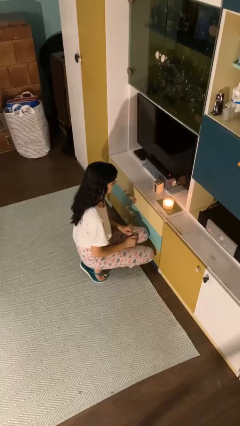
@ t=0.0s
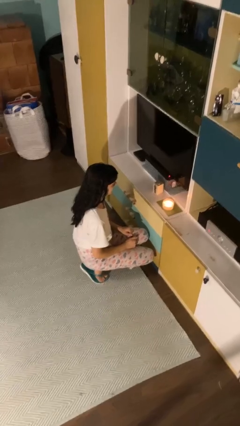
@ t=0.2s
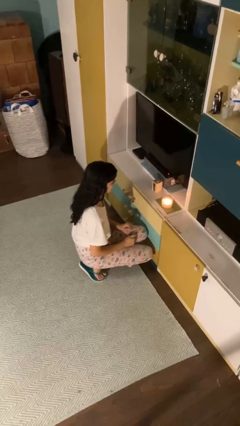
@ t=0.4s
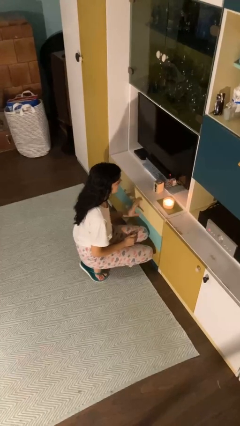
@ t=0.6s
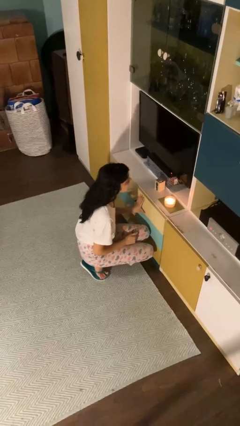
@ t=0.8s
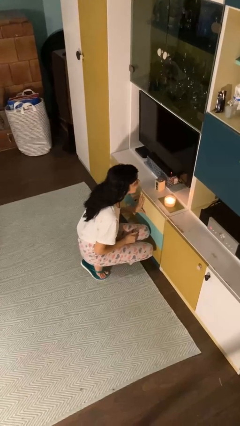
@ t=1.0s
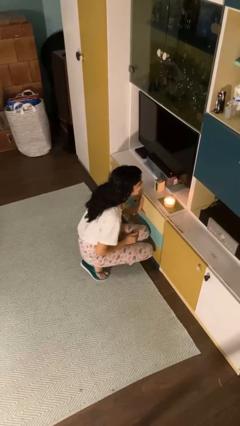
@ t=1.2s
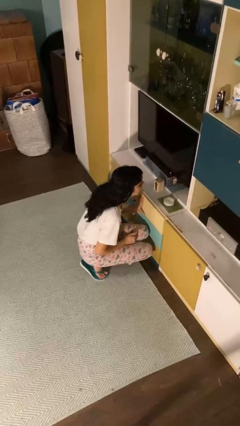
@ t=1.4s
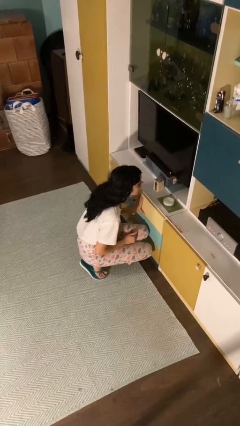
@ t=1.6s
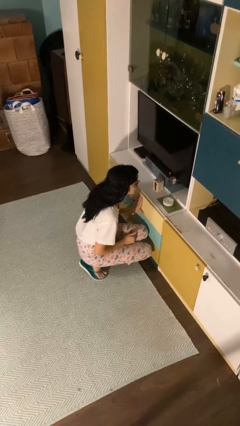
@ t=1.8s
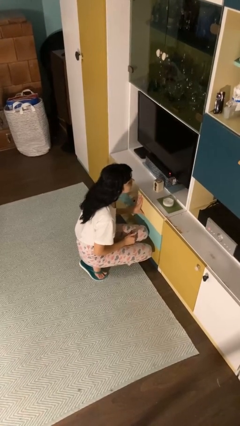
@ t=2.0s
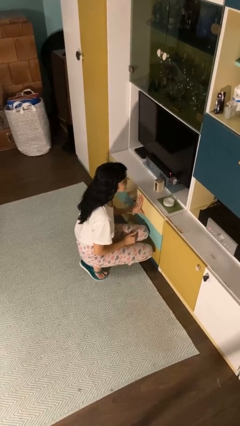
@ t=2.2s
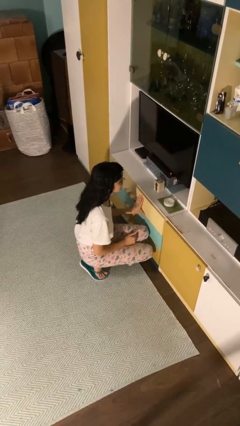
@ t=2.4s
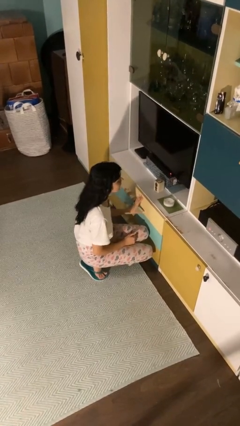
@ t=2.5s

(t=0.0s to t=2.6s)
person extinguishes candle

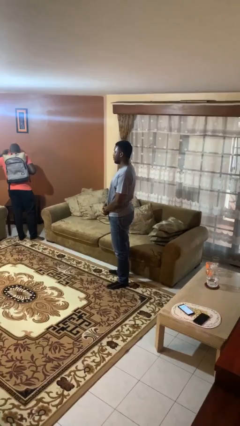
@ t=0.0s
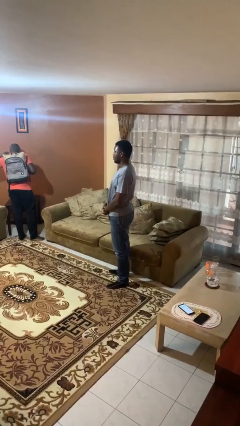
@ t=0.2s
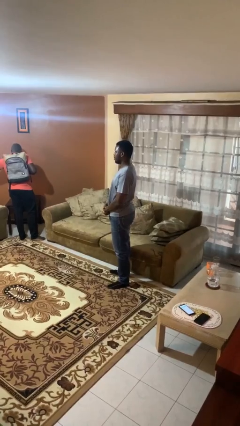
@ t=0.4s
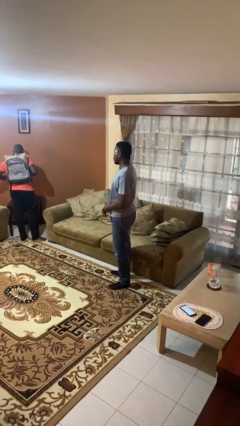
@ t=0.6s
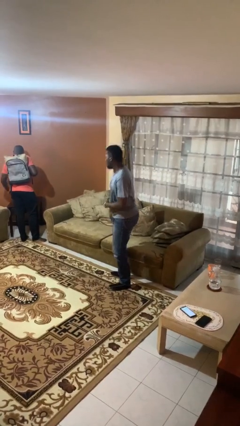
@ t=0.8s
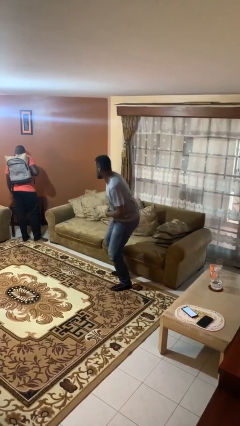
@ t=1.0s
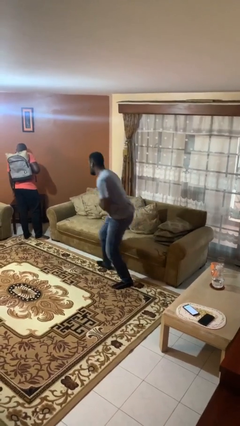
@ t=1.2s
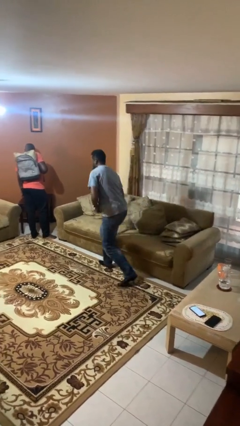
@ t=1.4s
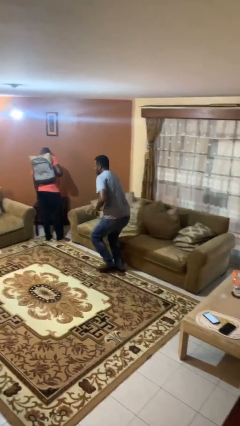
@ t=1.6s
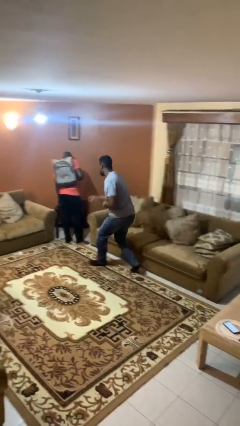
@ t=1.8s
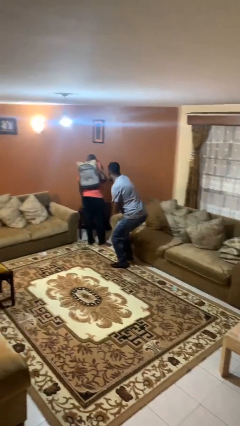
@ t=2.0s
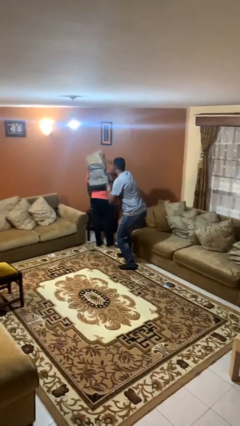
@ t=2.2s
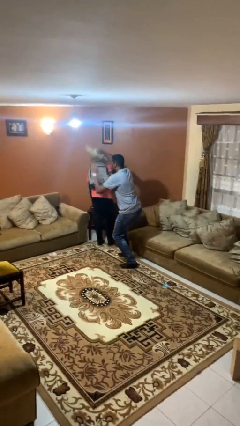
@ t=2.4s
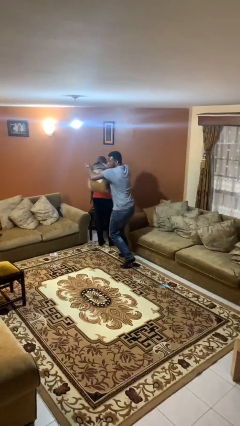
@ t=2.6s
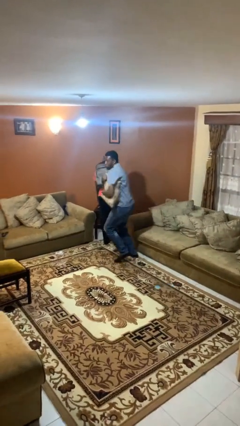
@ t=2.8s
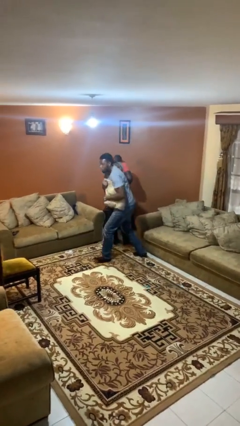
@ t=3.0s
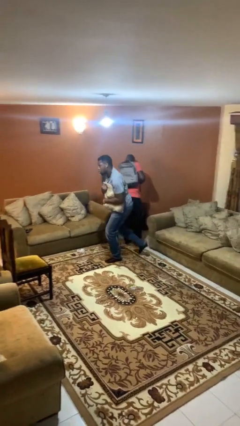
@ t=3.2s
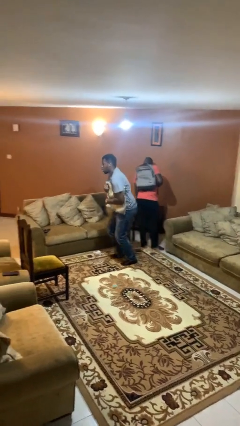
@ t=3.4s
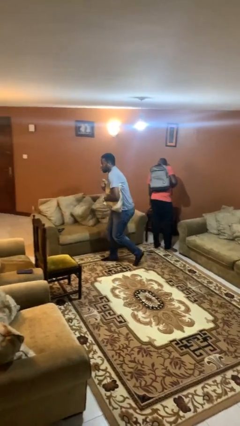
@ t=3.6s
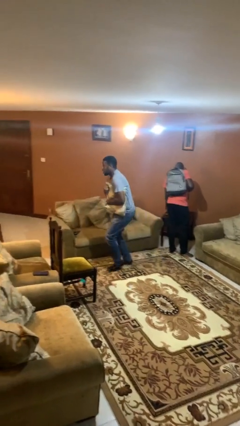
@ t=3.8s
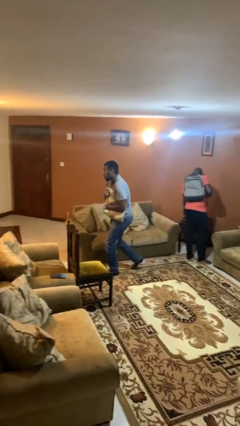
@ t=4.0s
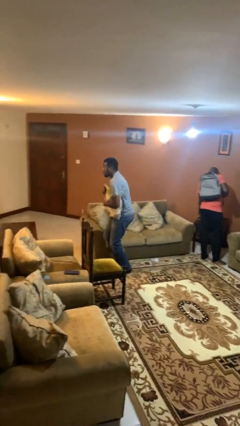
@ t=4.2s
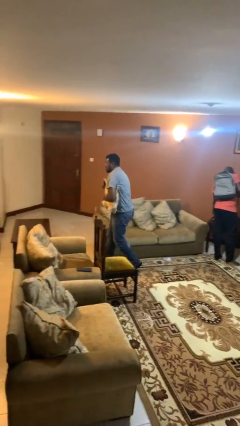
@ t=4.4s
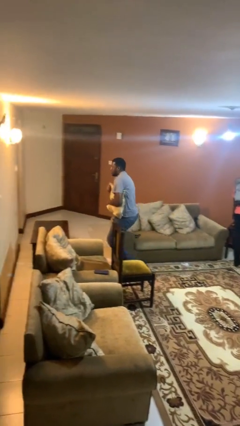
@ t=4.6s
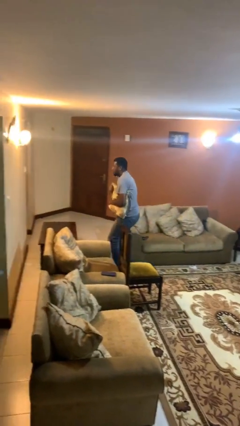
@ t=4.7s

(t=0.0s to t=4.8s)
person steals object from person

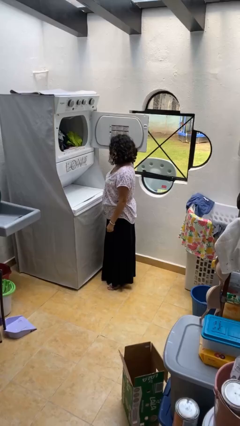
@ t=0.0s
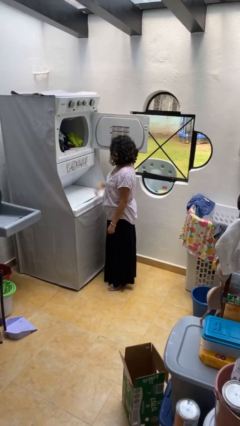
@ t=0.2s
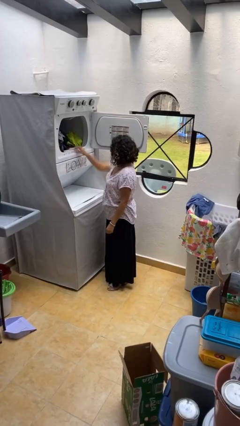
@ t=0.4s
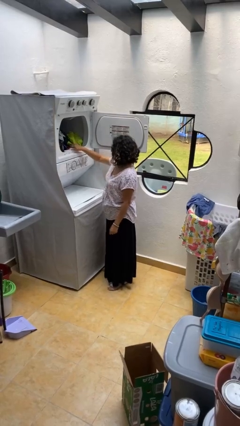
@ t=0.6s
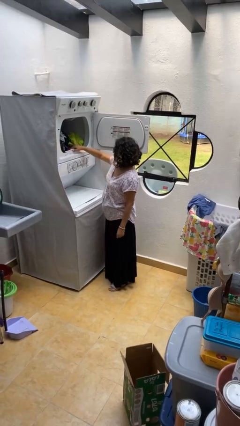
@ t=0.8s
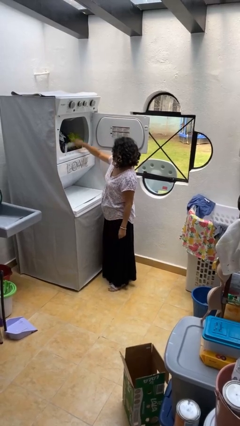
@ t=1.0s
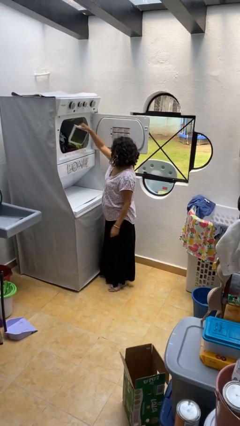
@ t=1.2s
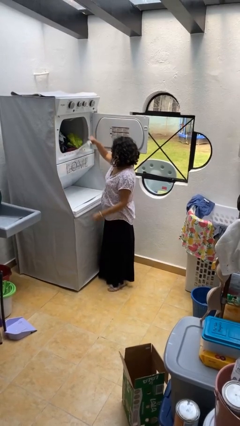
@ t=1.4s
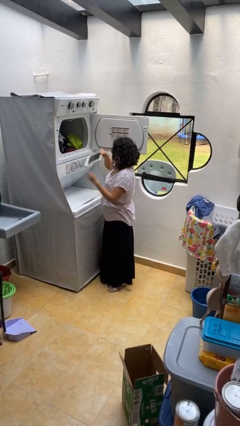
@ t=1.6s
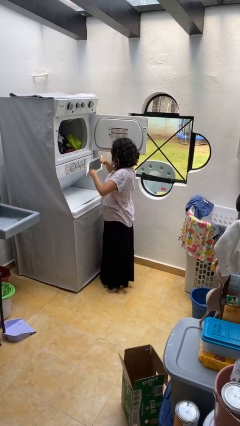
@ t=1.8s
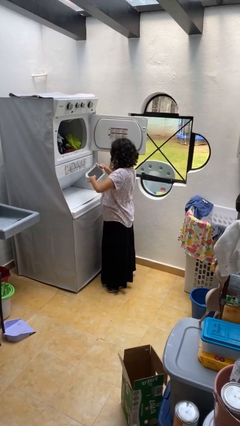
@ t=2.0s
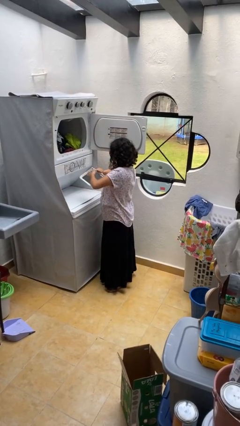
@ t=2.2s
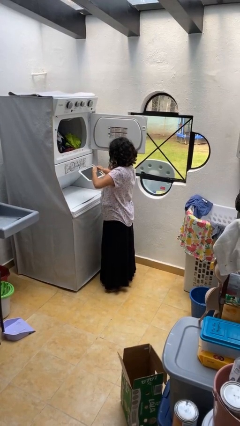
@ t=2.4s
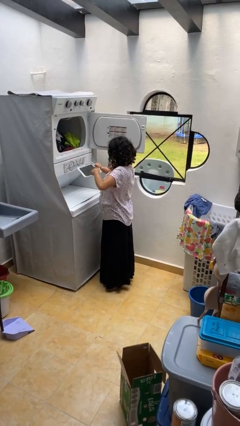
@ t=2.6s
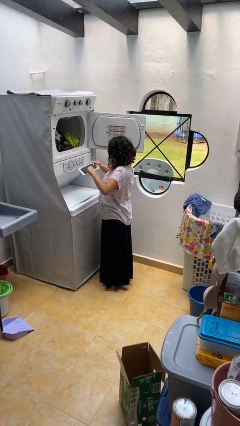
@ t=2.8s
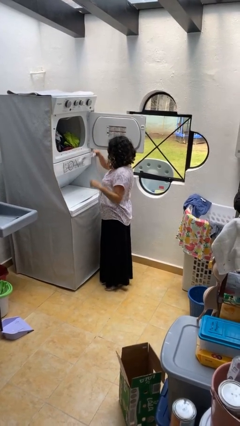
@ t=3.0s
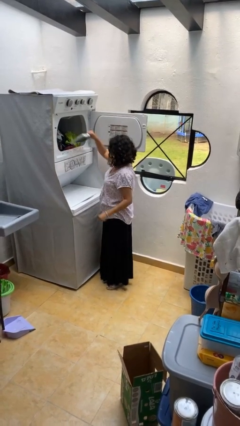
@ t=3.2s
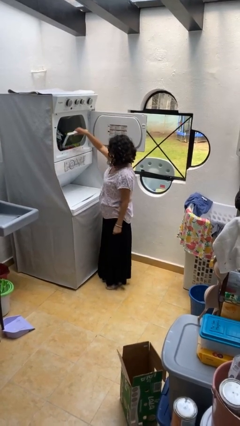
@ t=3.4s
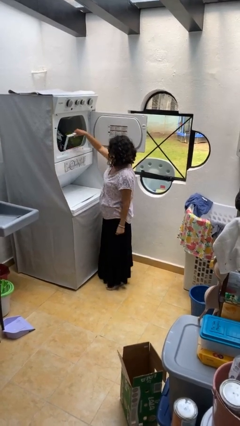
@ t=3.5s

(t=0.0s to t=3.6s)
person cleans dryer lint trap

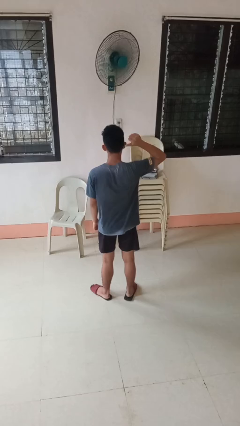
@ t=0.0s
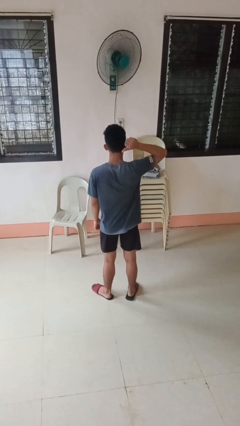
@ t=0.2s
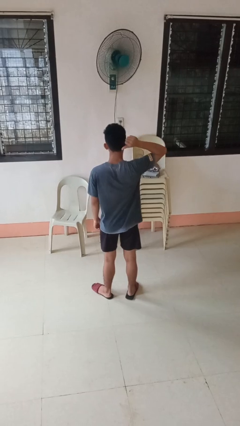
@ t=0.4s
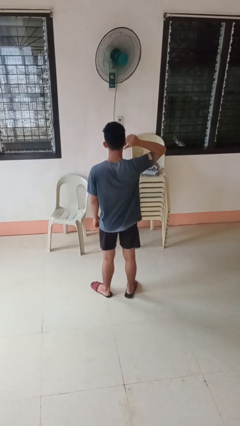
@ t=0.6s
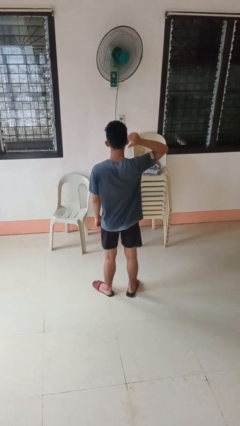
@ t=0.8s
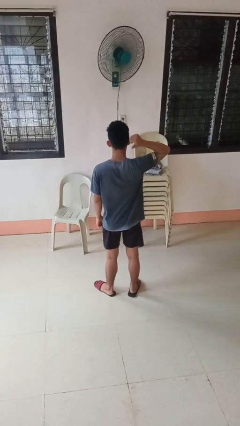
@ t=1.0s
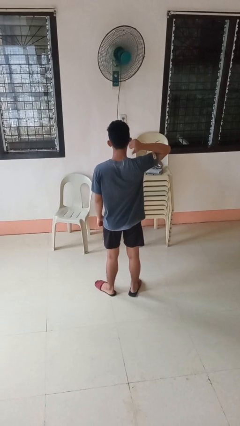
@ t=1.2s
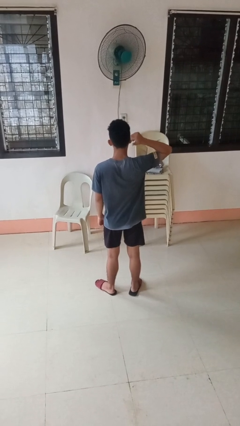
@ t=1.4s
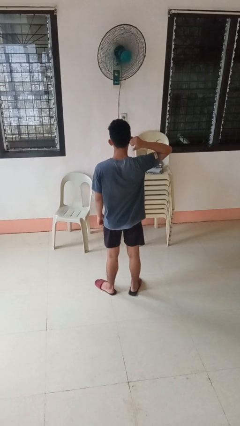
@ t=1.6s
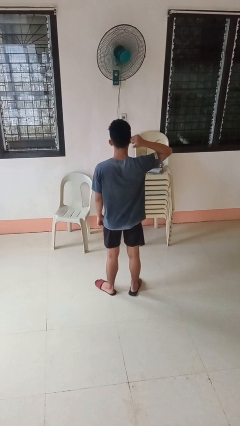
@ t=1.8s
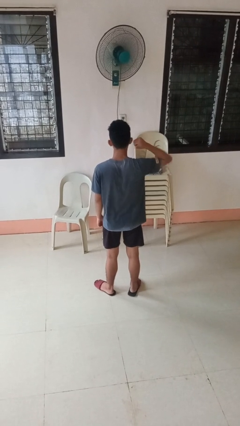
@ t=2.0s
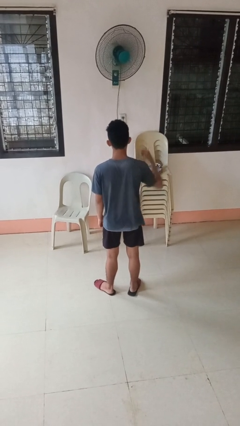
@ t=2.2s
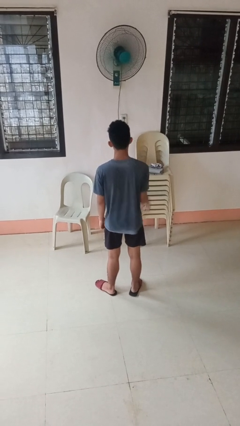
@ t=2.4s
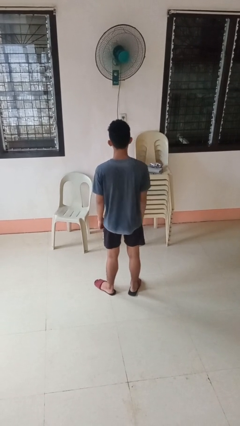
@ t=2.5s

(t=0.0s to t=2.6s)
person gestures behind me

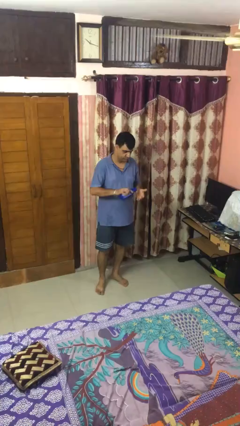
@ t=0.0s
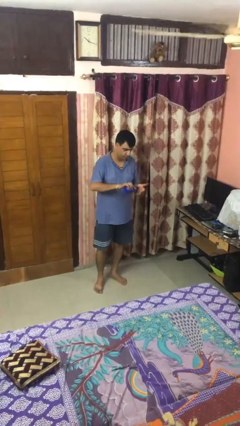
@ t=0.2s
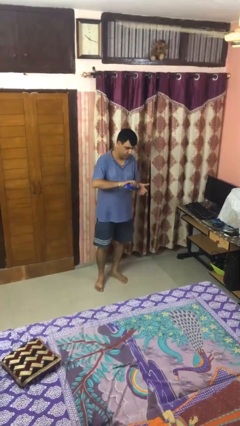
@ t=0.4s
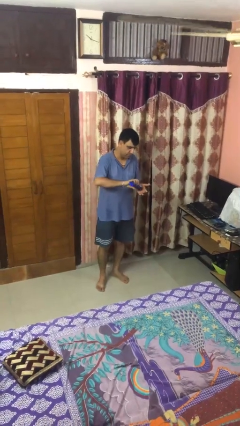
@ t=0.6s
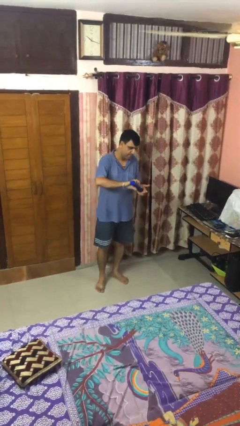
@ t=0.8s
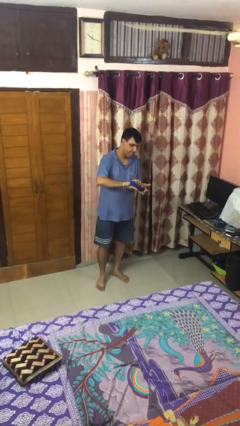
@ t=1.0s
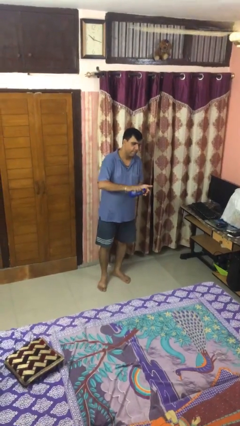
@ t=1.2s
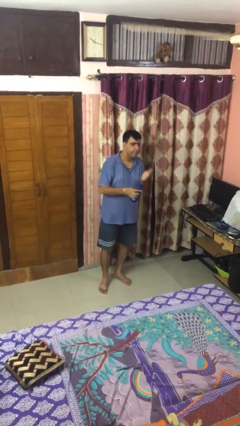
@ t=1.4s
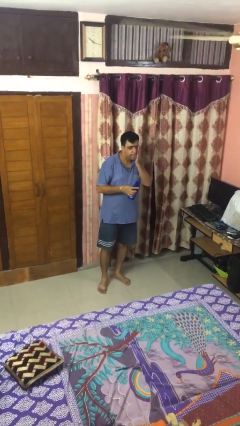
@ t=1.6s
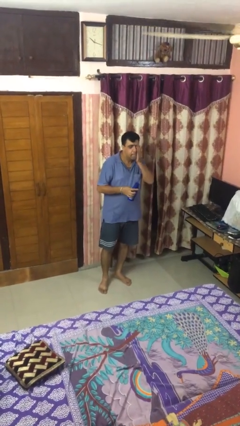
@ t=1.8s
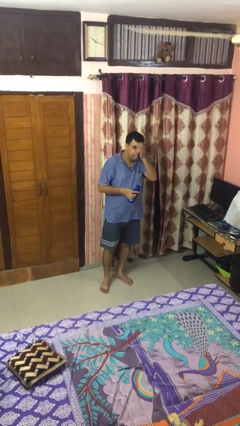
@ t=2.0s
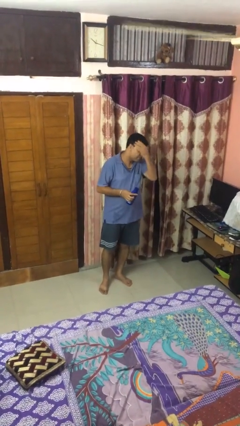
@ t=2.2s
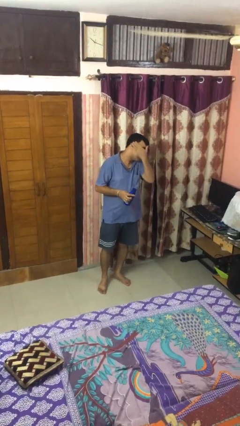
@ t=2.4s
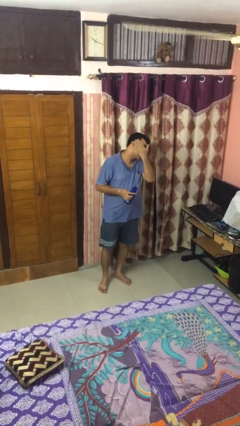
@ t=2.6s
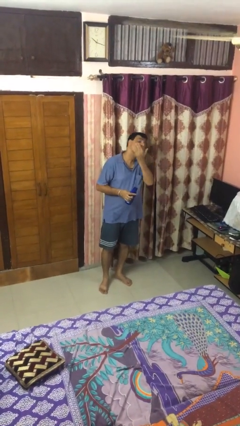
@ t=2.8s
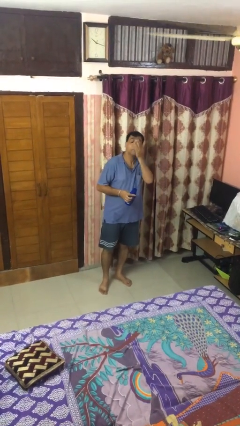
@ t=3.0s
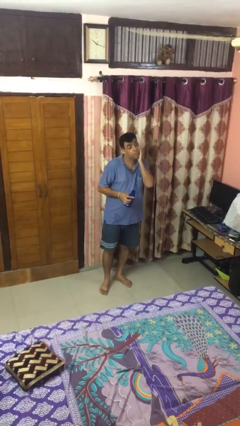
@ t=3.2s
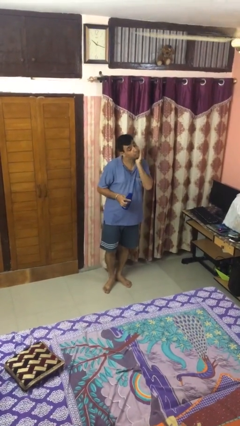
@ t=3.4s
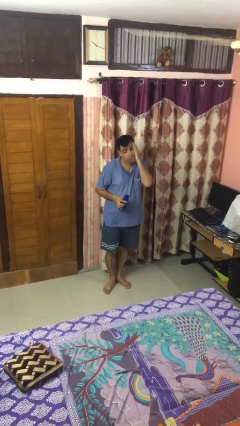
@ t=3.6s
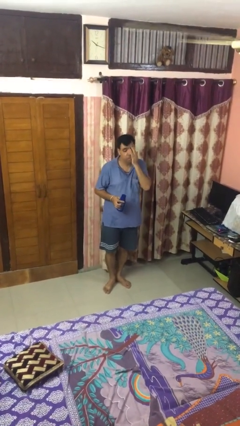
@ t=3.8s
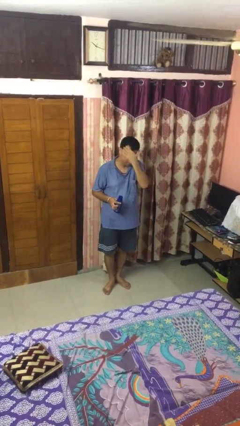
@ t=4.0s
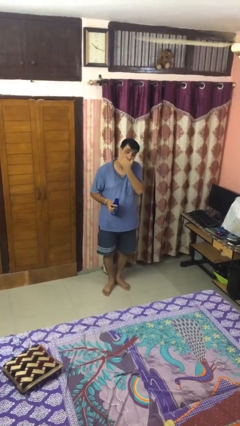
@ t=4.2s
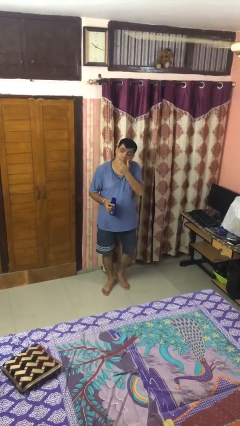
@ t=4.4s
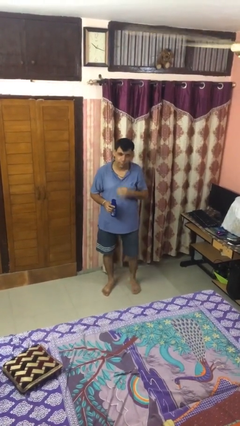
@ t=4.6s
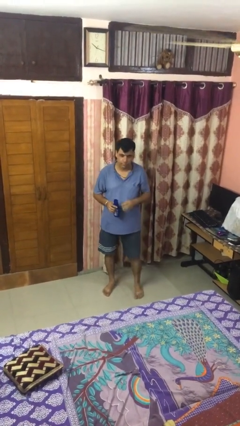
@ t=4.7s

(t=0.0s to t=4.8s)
person applies facial moisturizer
